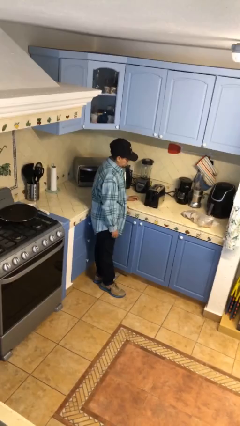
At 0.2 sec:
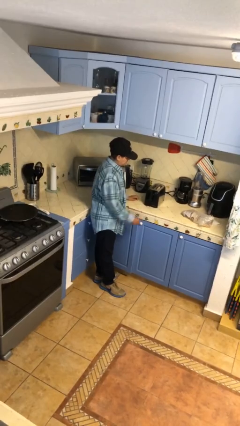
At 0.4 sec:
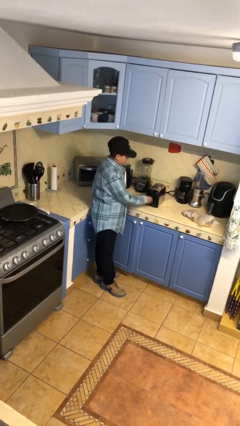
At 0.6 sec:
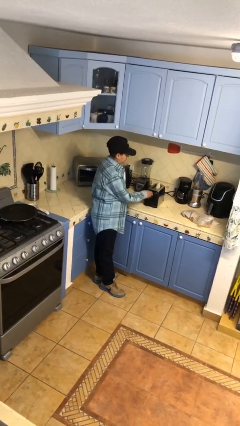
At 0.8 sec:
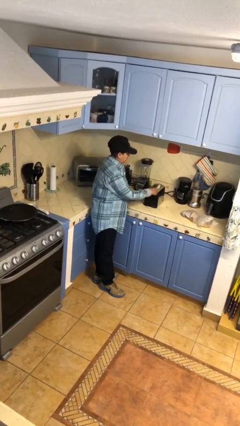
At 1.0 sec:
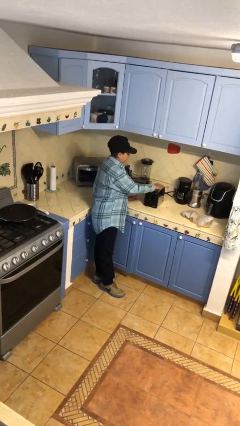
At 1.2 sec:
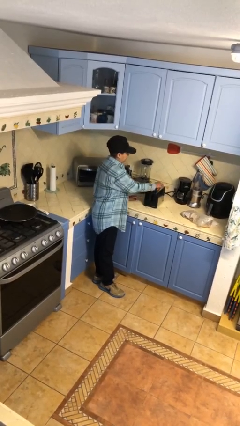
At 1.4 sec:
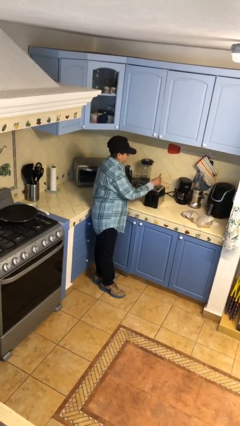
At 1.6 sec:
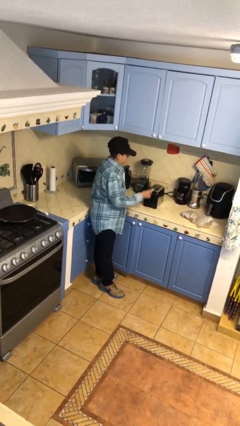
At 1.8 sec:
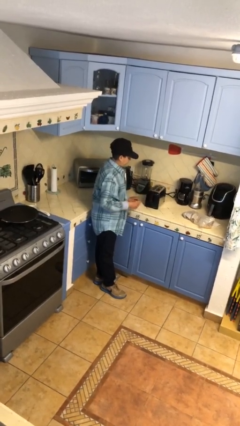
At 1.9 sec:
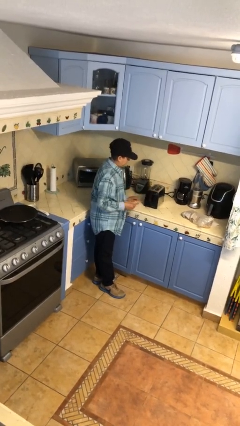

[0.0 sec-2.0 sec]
person takes object from toaster

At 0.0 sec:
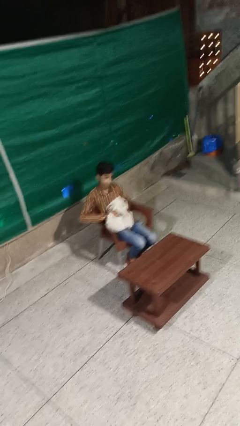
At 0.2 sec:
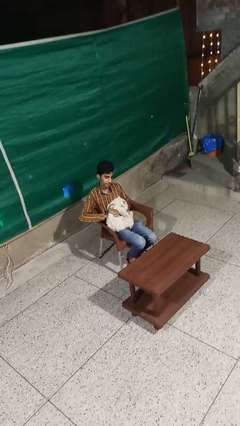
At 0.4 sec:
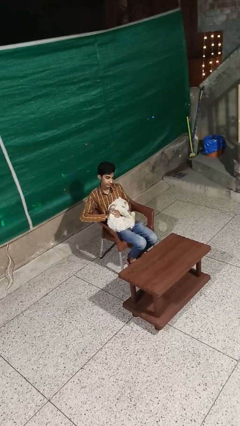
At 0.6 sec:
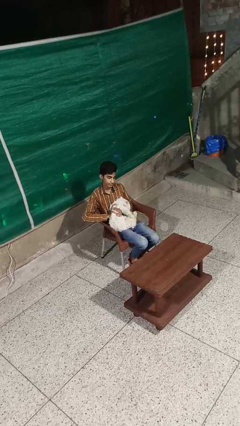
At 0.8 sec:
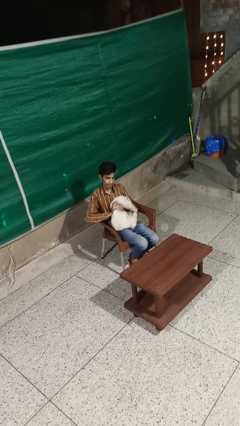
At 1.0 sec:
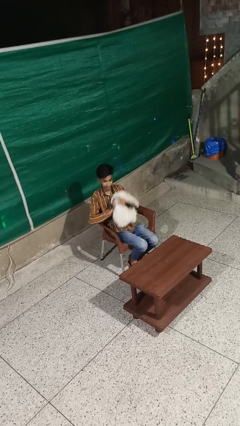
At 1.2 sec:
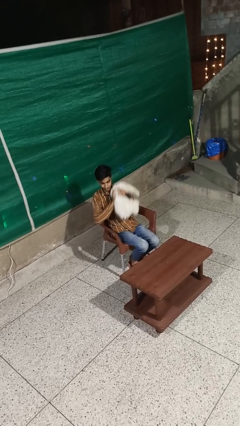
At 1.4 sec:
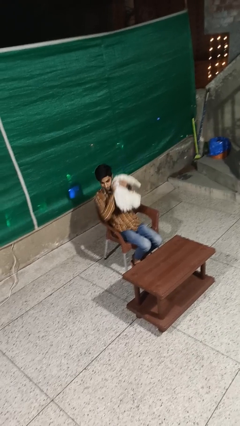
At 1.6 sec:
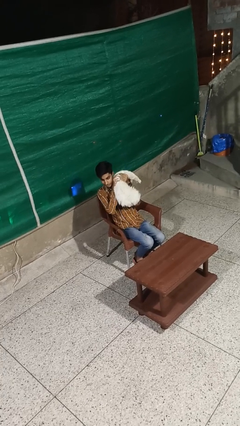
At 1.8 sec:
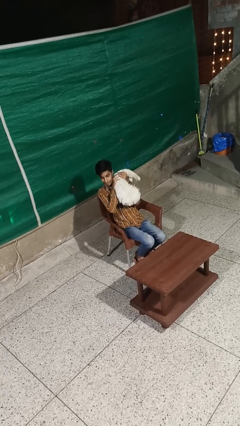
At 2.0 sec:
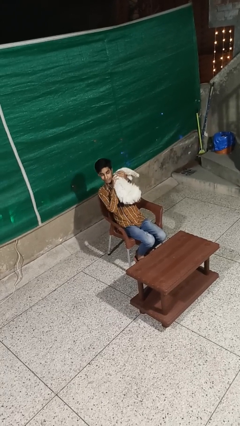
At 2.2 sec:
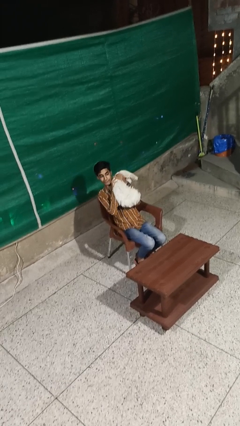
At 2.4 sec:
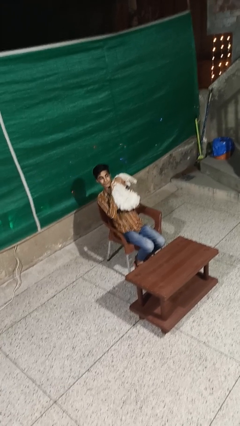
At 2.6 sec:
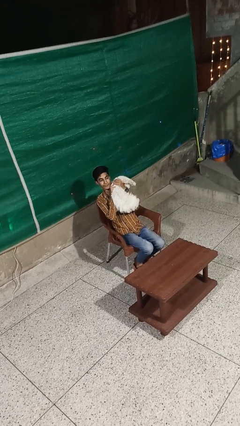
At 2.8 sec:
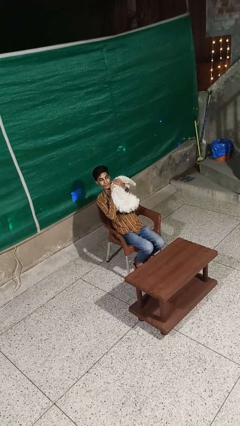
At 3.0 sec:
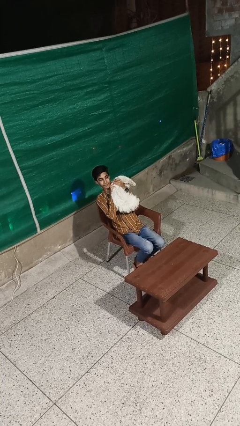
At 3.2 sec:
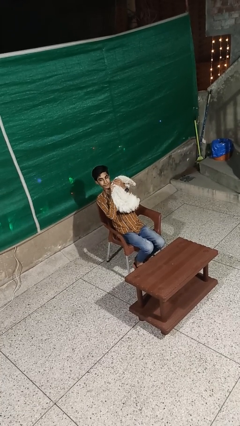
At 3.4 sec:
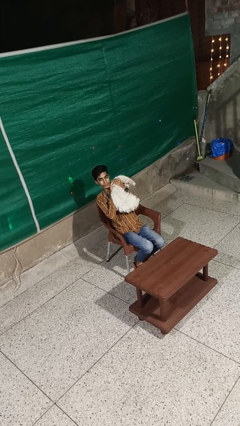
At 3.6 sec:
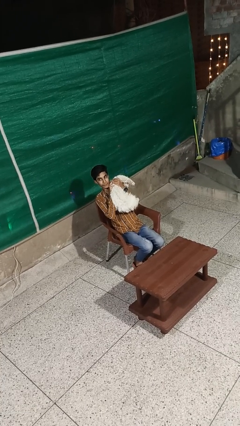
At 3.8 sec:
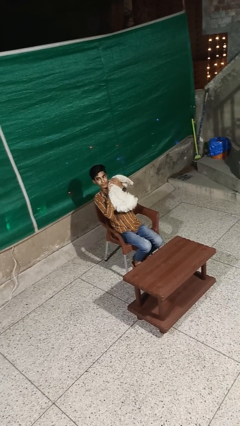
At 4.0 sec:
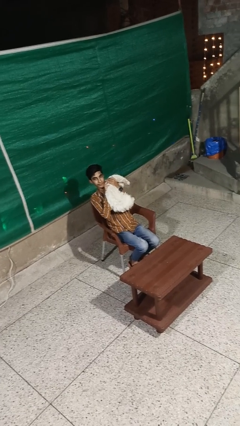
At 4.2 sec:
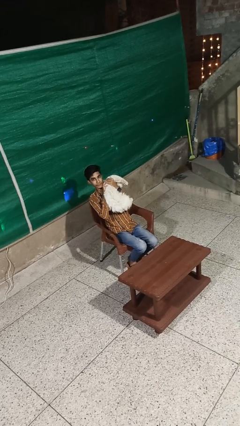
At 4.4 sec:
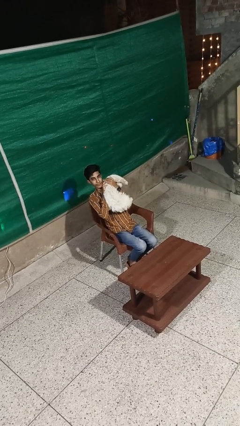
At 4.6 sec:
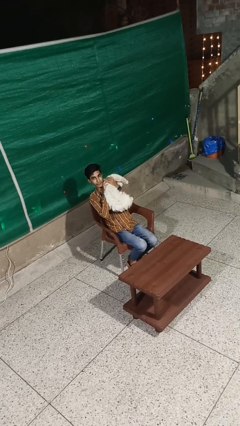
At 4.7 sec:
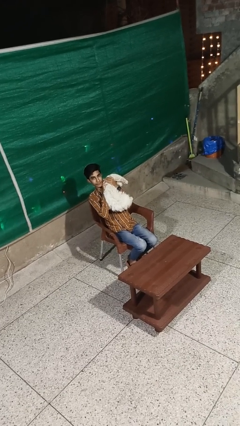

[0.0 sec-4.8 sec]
person hugs cat

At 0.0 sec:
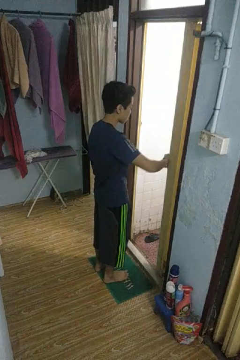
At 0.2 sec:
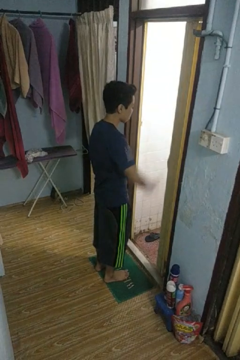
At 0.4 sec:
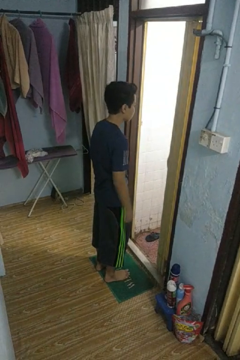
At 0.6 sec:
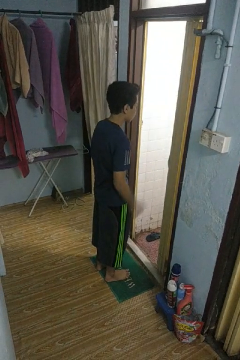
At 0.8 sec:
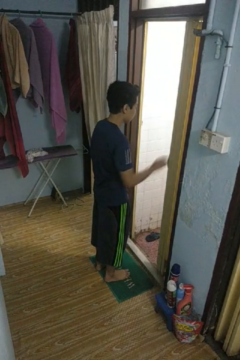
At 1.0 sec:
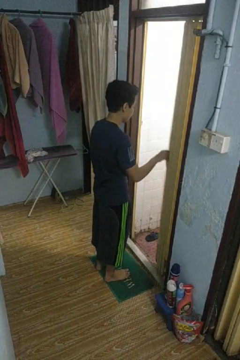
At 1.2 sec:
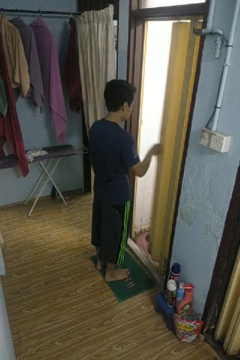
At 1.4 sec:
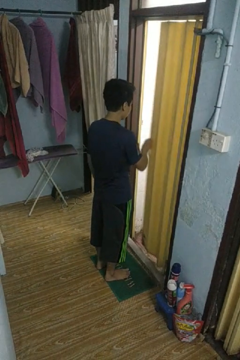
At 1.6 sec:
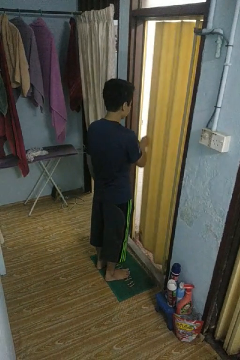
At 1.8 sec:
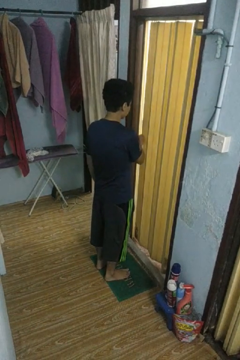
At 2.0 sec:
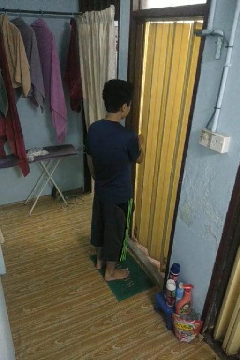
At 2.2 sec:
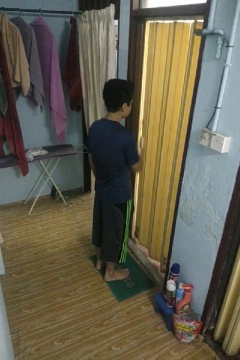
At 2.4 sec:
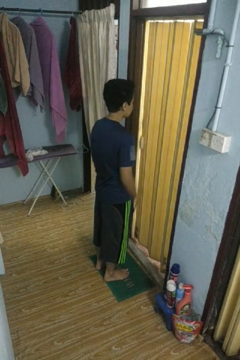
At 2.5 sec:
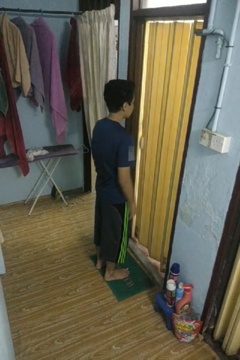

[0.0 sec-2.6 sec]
person closes sliding door

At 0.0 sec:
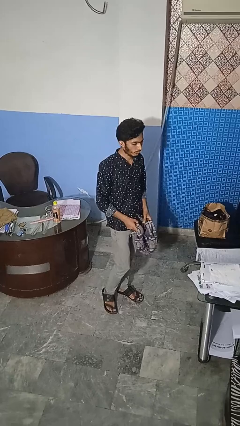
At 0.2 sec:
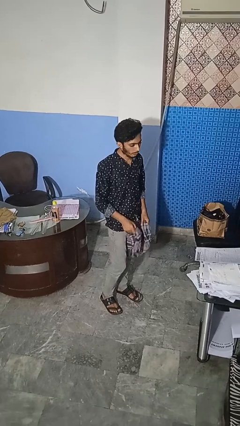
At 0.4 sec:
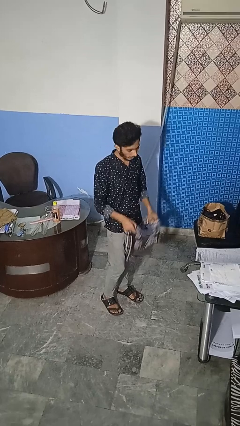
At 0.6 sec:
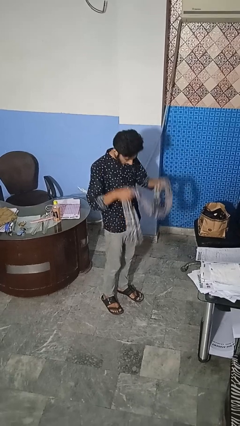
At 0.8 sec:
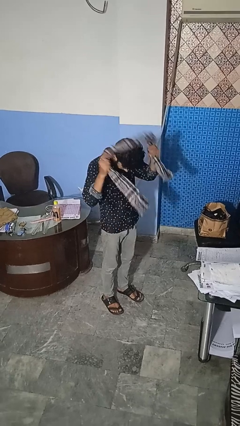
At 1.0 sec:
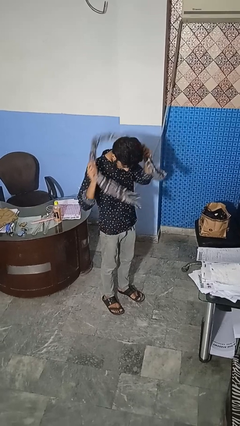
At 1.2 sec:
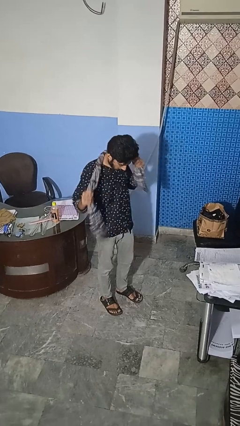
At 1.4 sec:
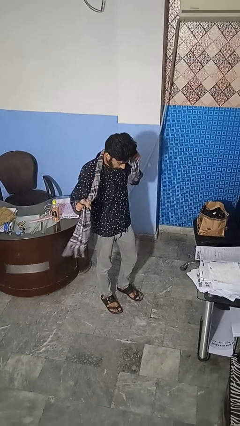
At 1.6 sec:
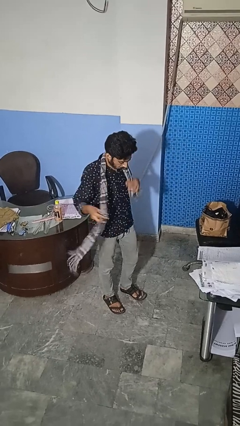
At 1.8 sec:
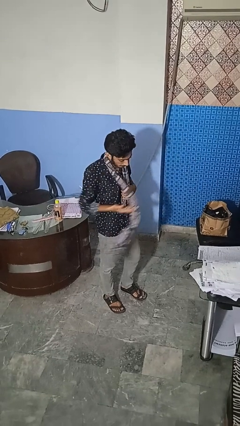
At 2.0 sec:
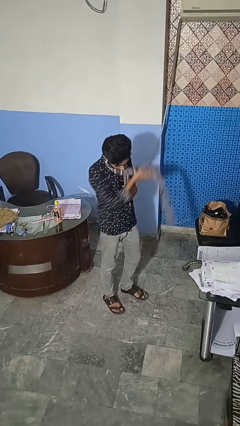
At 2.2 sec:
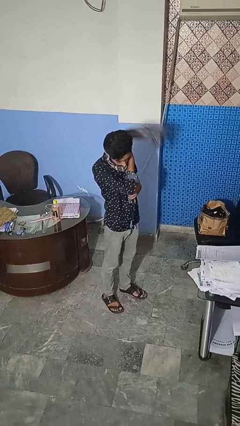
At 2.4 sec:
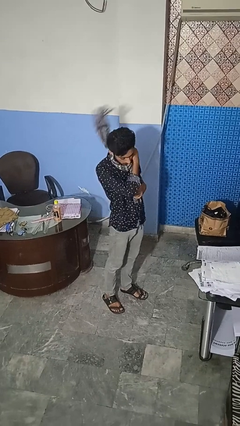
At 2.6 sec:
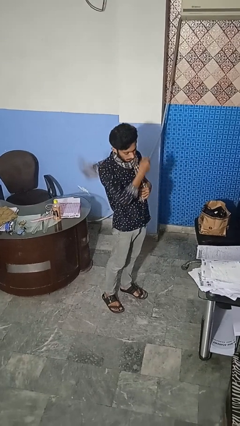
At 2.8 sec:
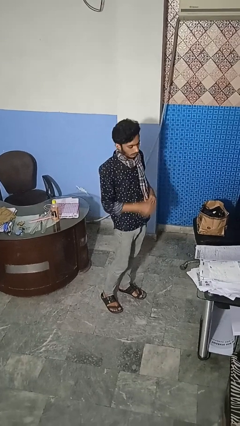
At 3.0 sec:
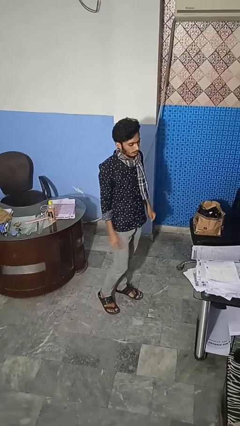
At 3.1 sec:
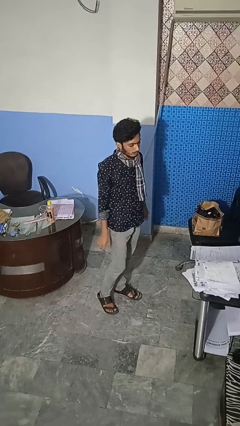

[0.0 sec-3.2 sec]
person puts on scarf

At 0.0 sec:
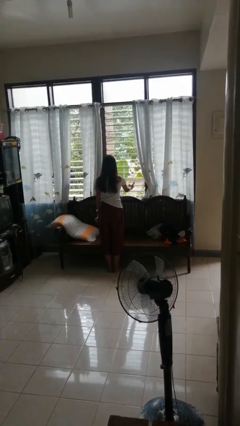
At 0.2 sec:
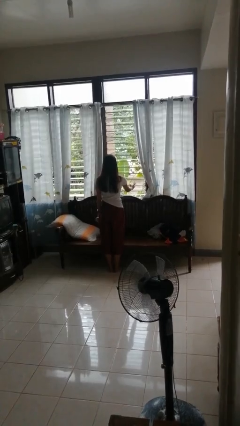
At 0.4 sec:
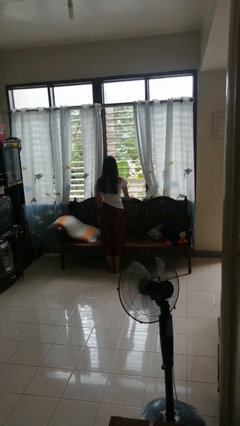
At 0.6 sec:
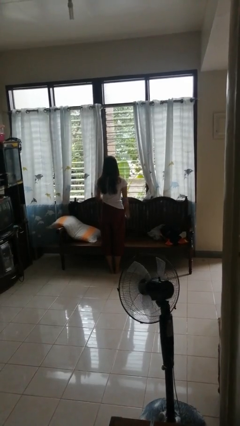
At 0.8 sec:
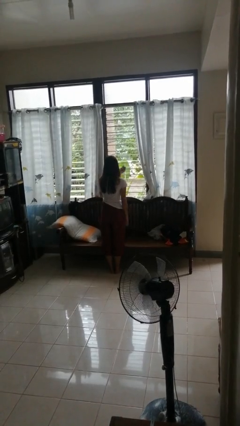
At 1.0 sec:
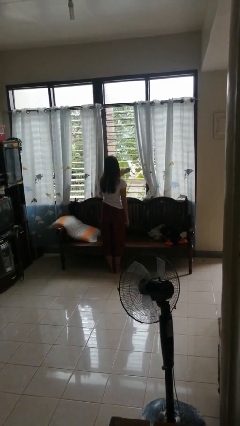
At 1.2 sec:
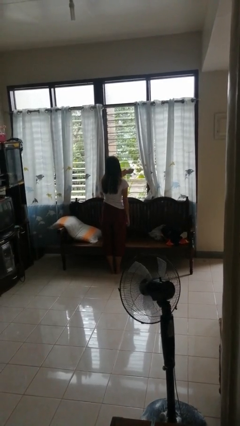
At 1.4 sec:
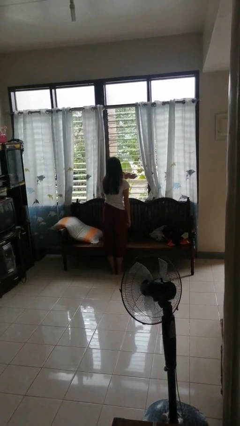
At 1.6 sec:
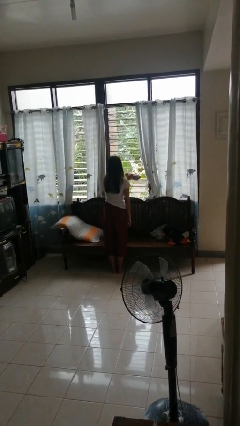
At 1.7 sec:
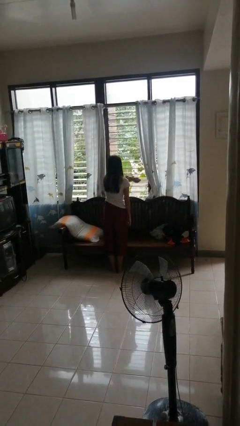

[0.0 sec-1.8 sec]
person washes window

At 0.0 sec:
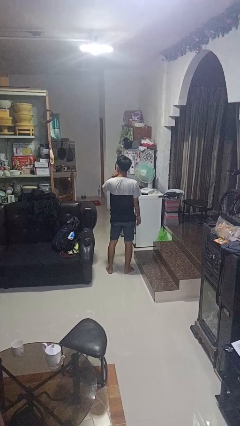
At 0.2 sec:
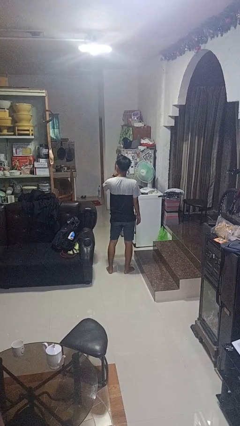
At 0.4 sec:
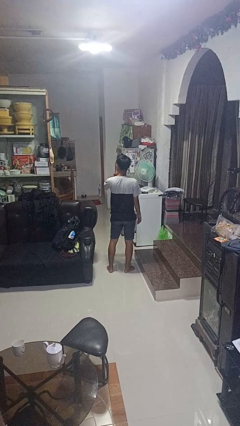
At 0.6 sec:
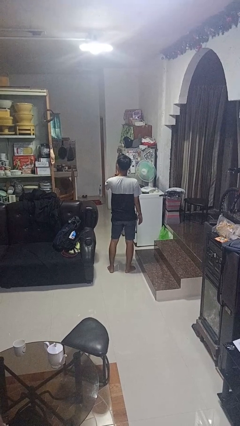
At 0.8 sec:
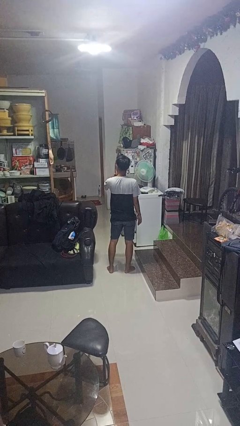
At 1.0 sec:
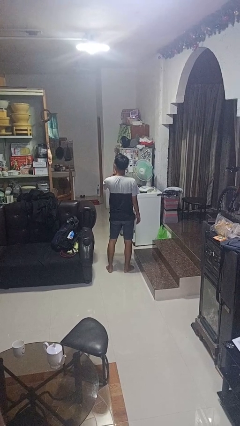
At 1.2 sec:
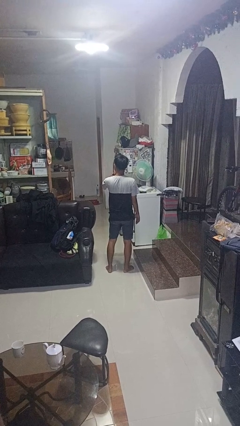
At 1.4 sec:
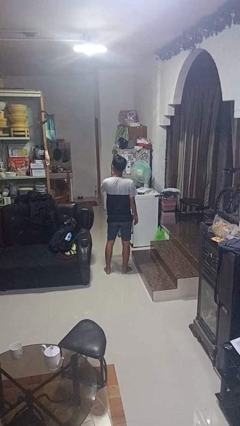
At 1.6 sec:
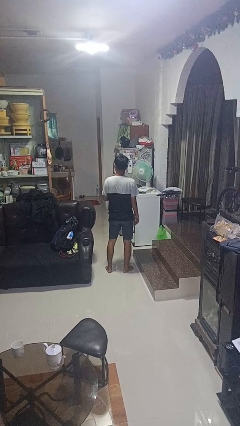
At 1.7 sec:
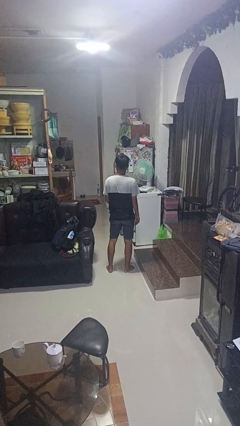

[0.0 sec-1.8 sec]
person gestures be quiet

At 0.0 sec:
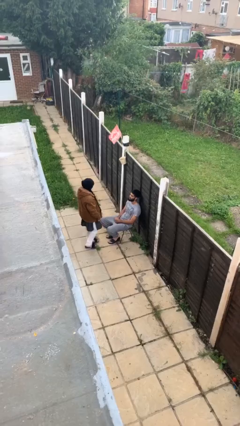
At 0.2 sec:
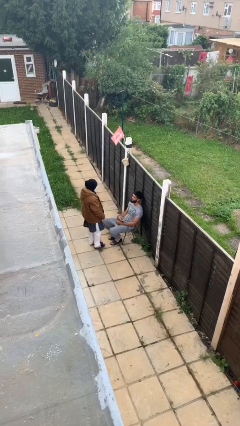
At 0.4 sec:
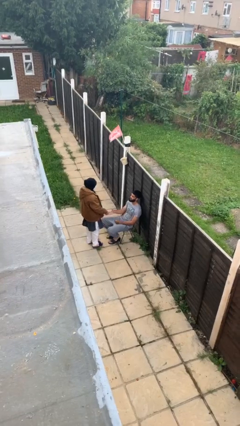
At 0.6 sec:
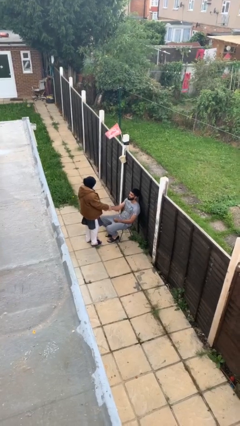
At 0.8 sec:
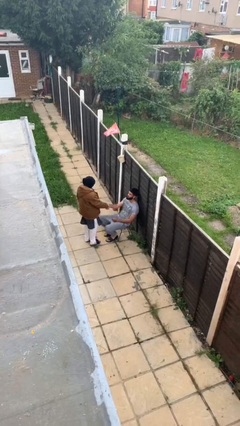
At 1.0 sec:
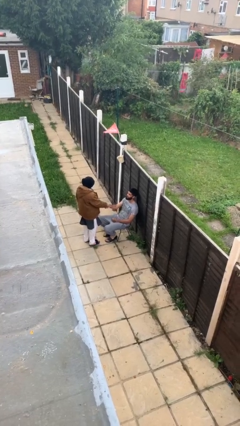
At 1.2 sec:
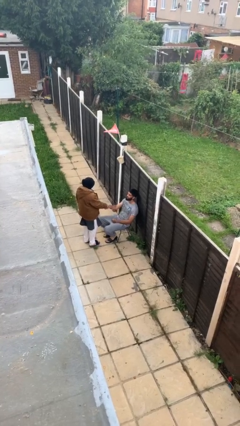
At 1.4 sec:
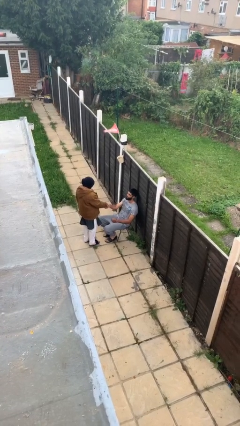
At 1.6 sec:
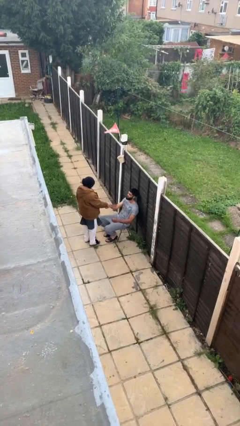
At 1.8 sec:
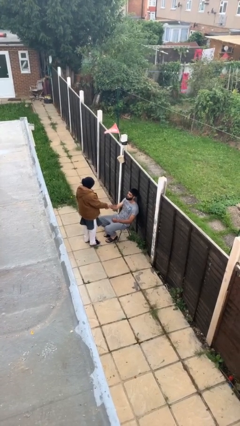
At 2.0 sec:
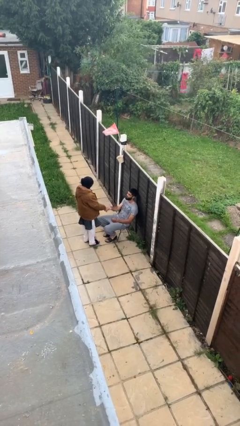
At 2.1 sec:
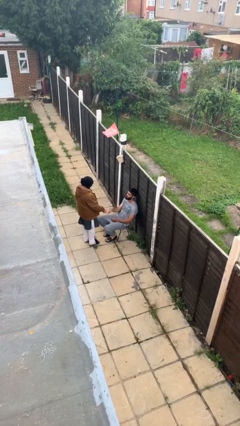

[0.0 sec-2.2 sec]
person shakes hand
